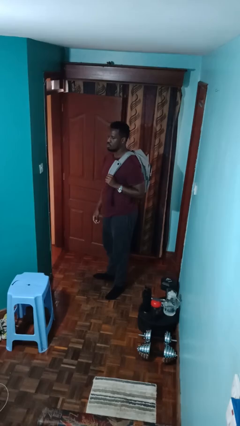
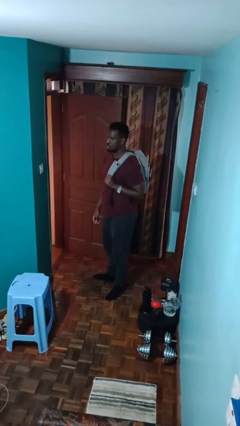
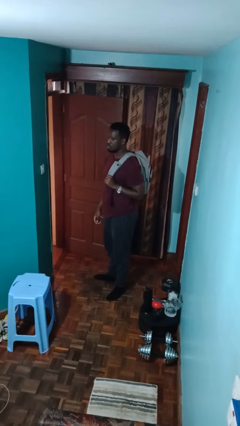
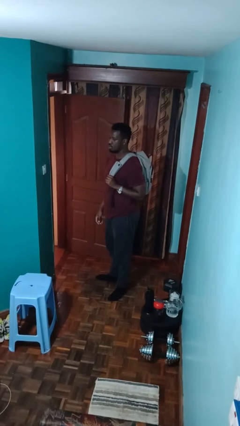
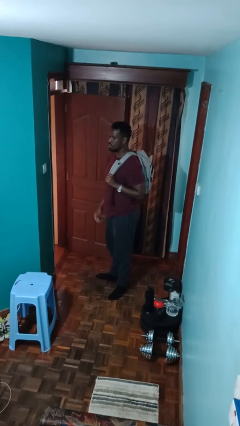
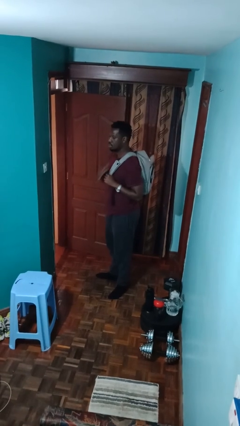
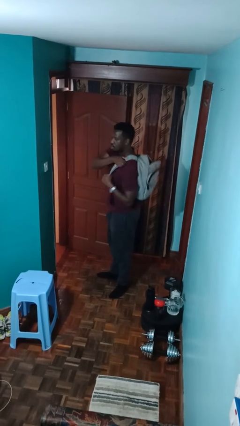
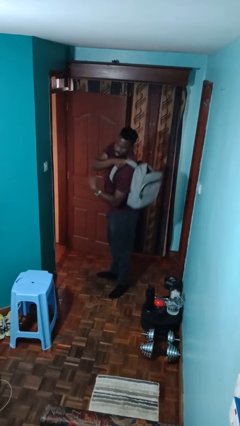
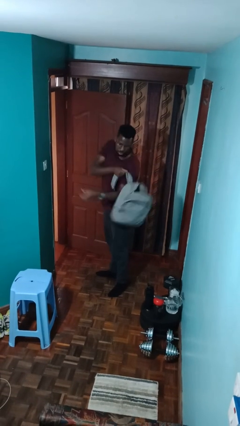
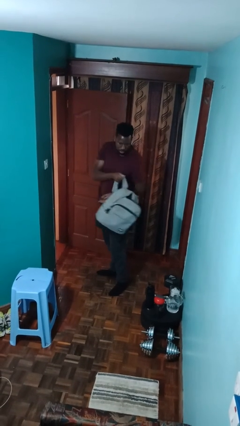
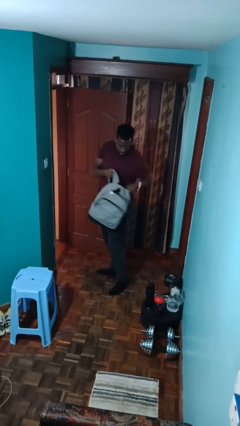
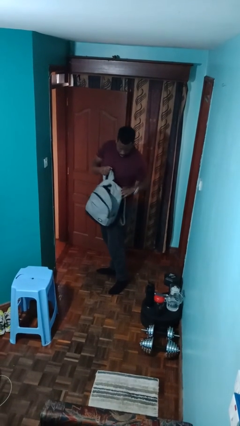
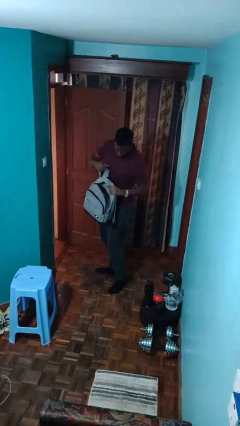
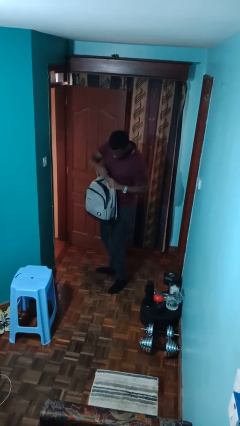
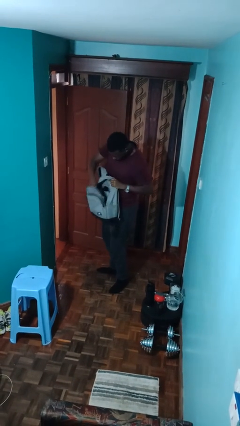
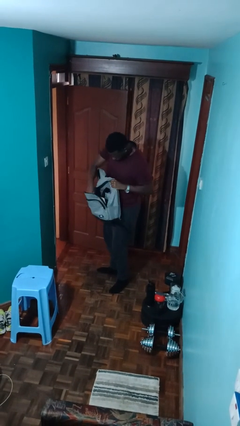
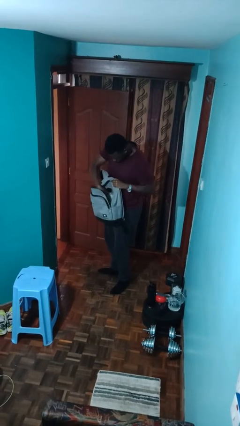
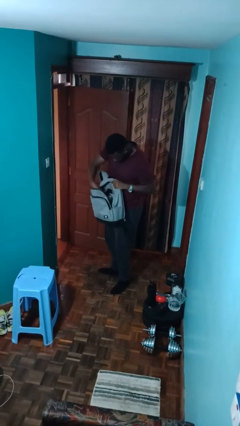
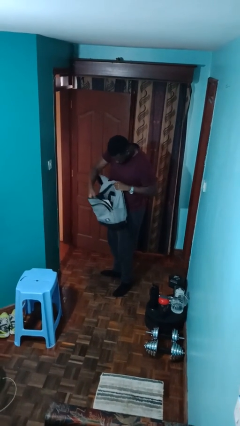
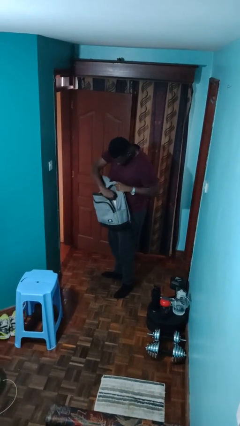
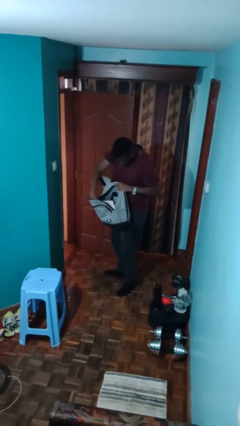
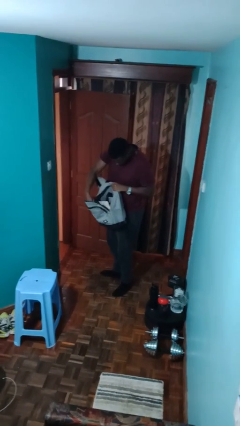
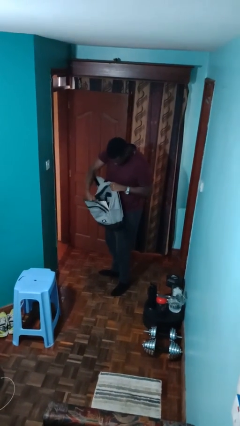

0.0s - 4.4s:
person searches in backpack

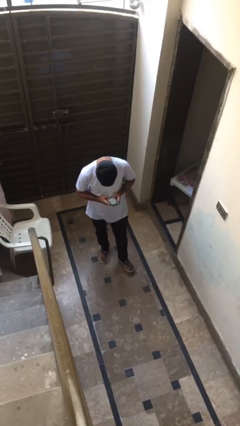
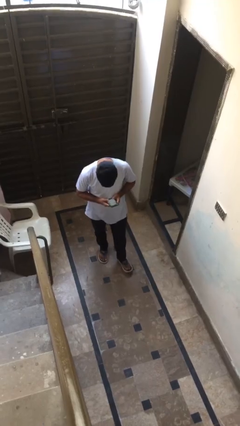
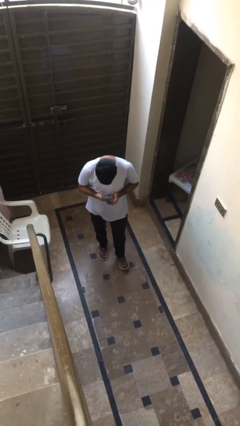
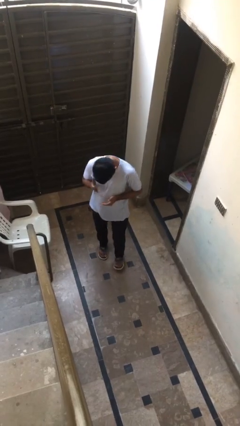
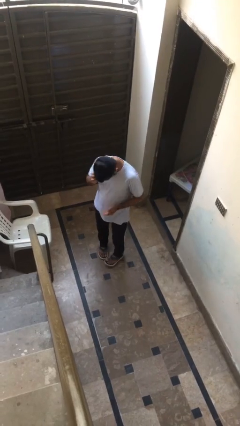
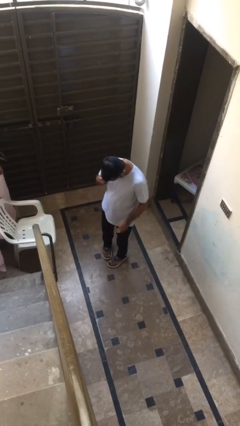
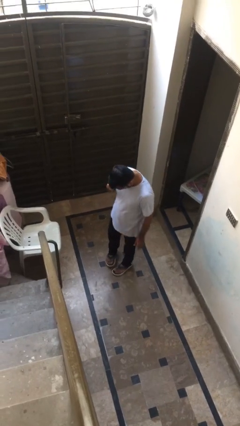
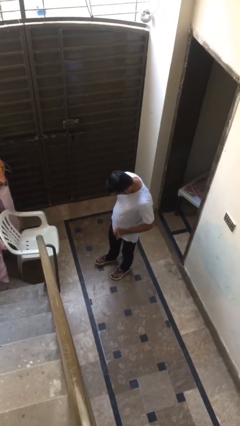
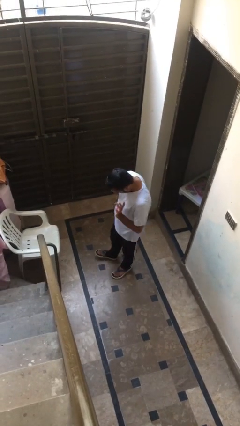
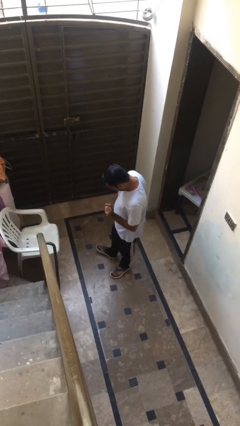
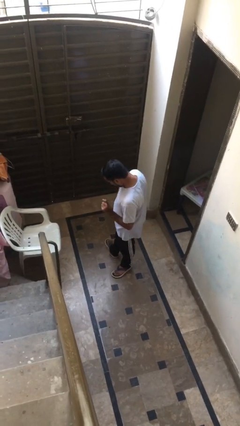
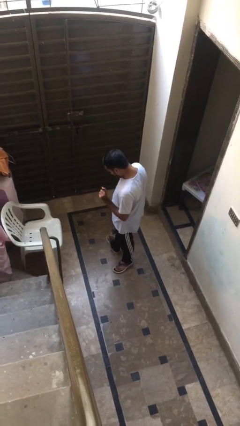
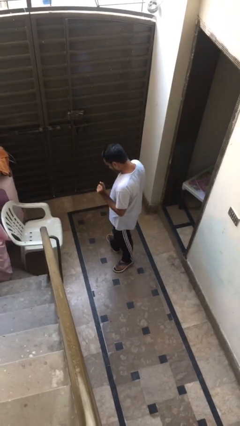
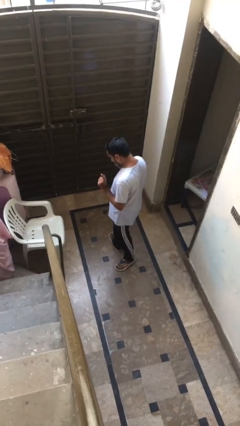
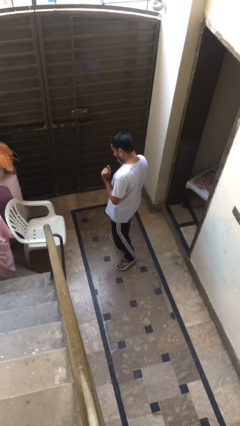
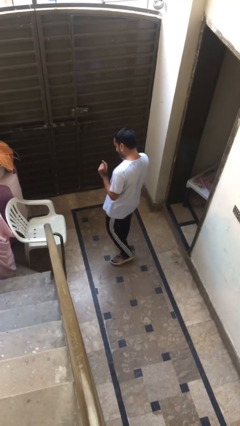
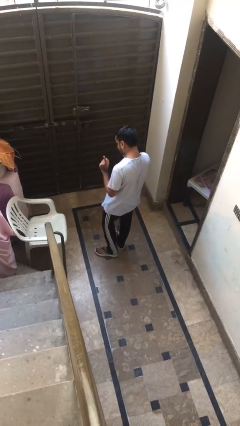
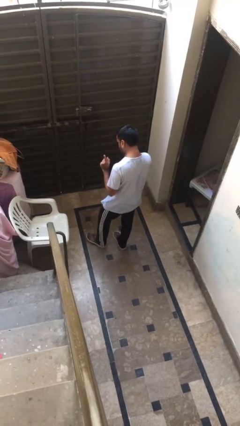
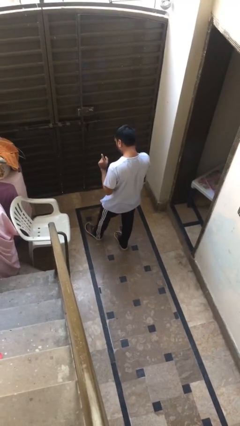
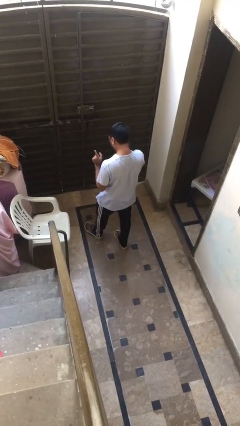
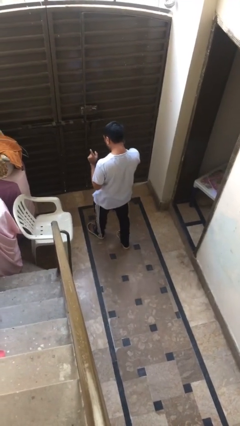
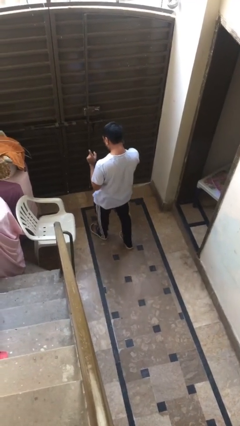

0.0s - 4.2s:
person talks on phone

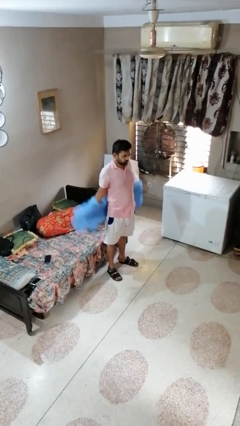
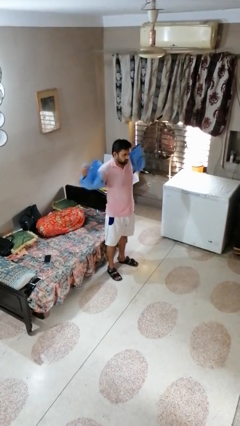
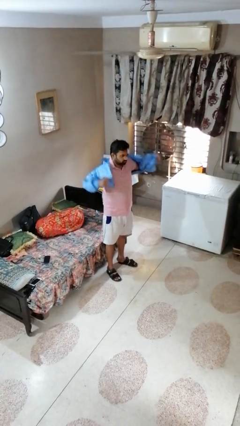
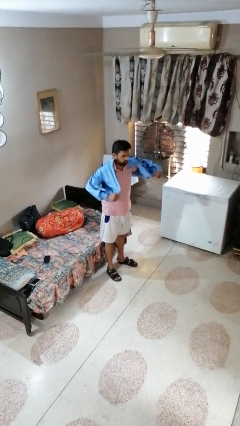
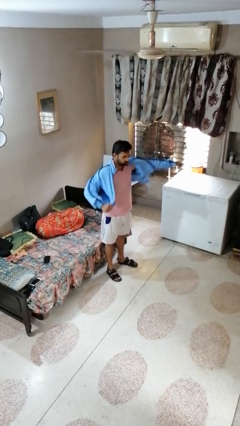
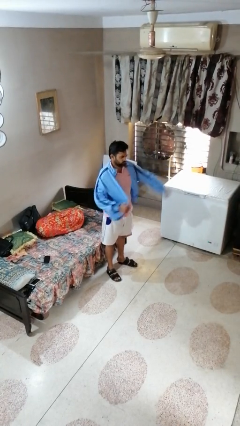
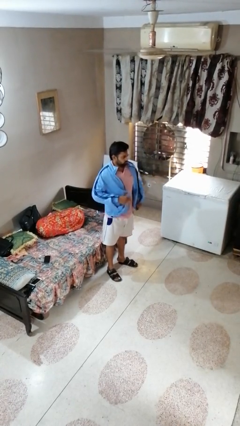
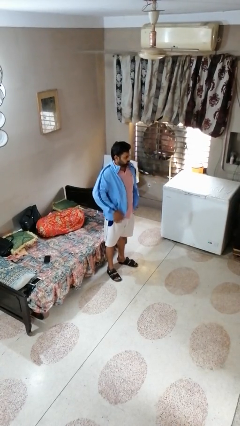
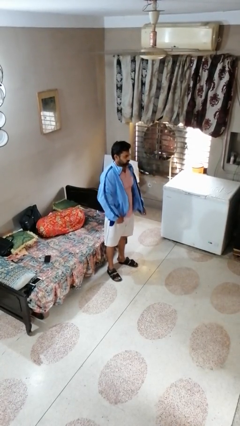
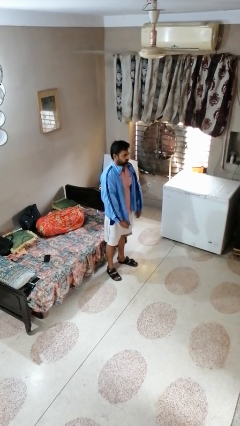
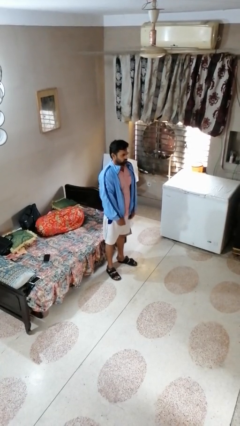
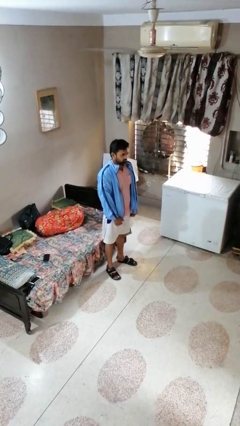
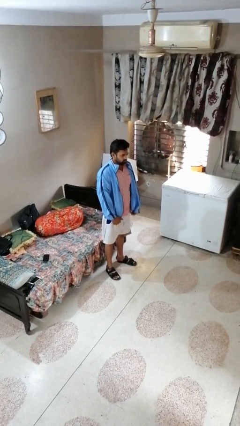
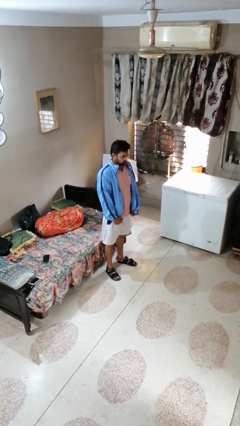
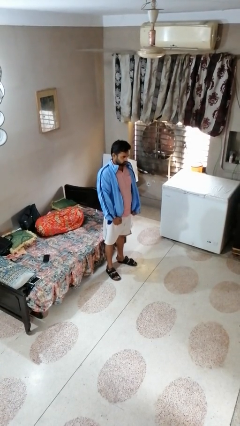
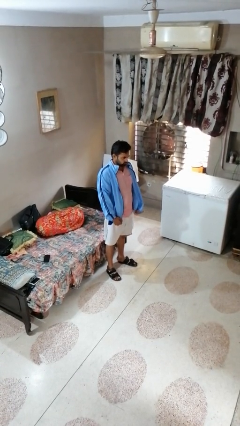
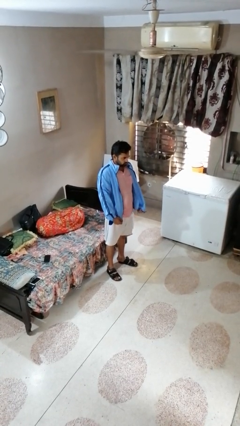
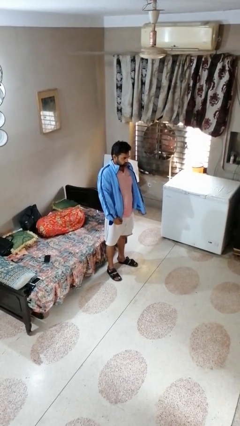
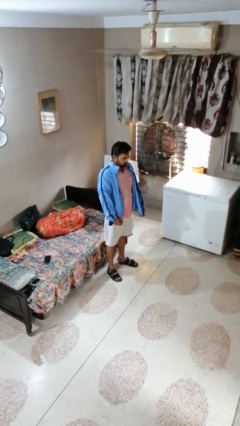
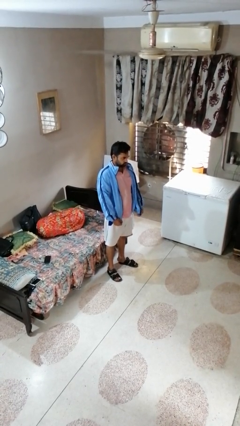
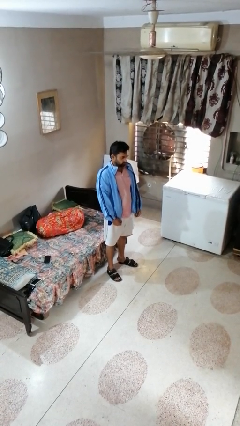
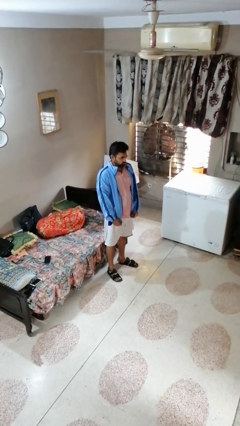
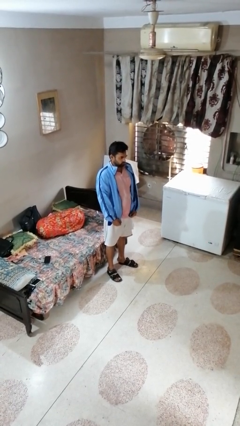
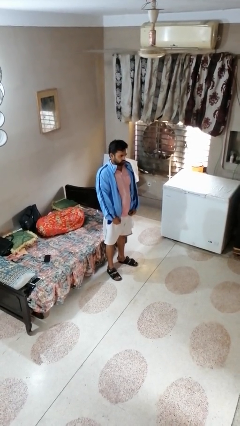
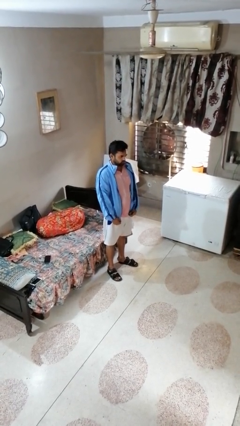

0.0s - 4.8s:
person puts on jacket

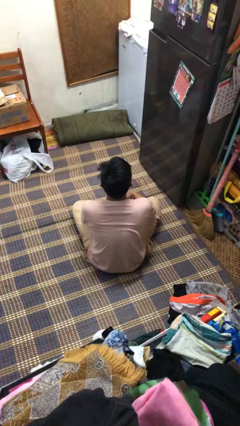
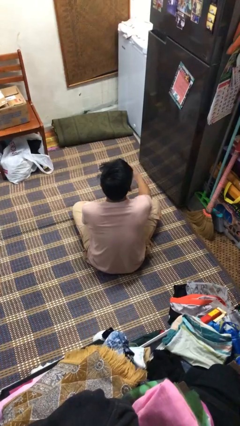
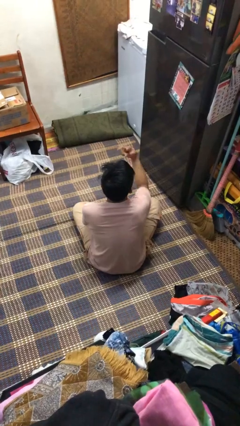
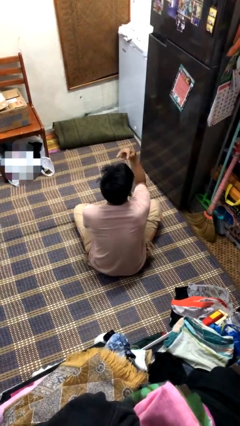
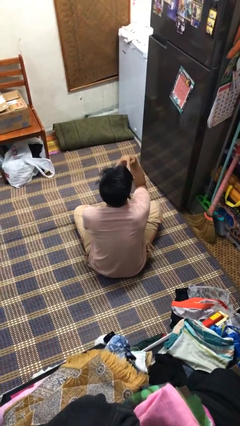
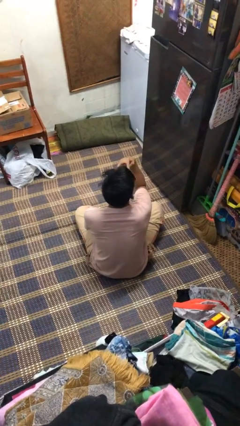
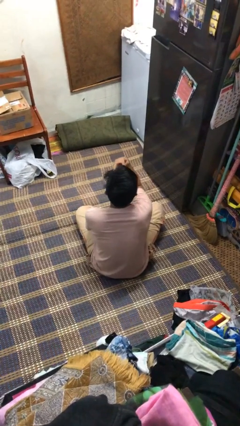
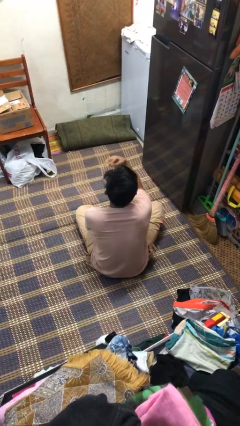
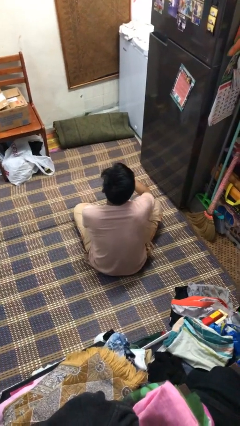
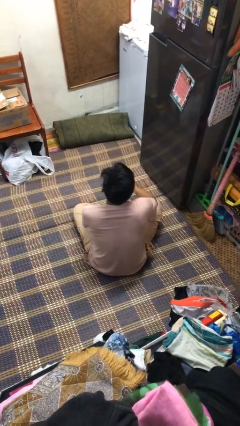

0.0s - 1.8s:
person gestures watch closely

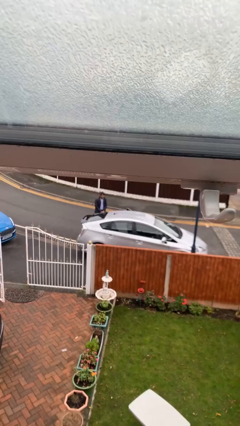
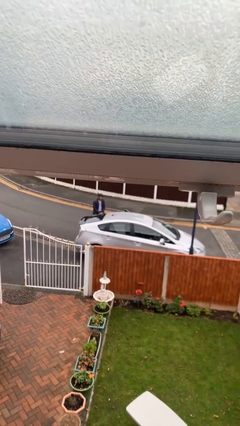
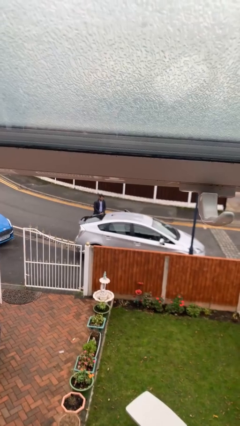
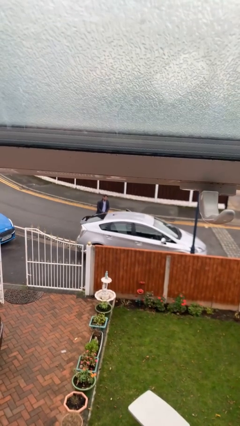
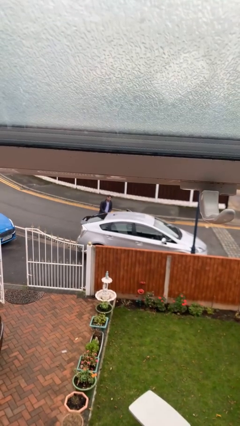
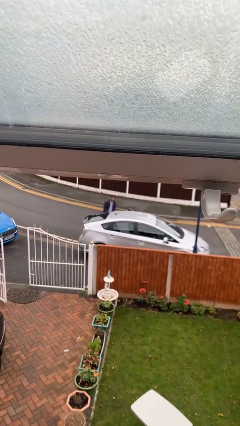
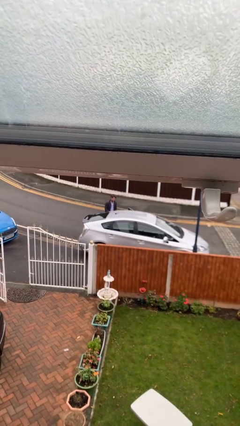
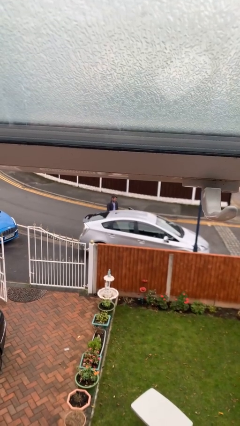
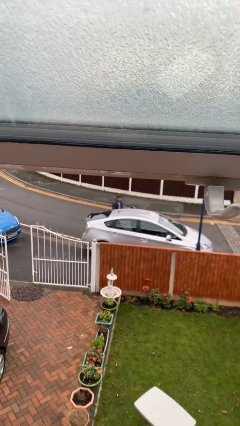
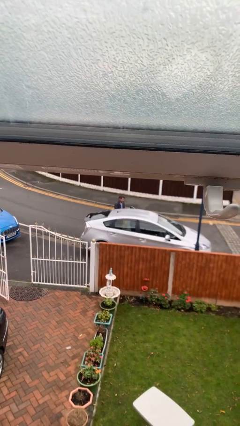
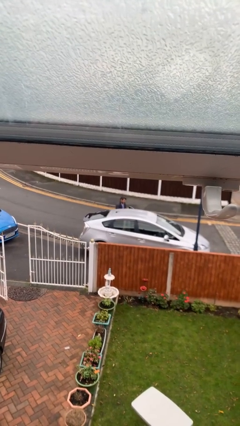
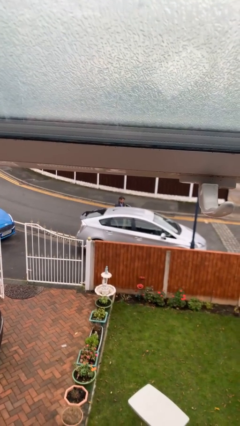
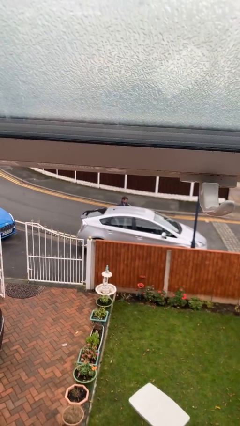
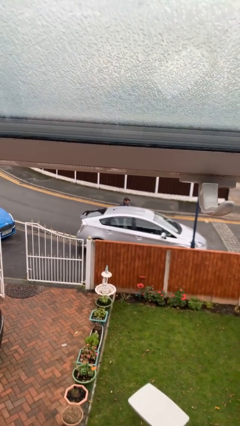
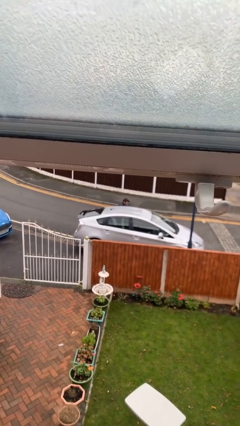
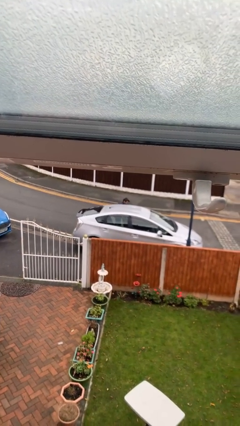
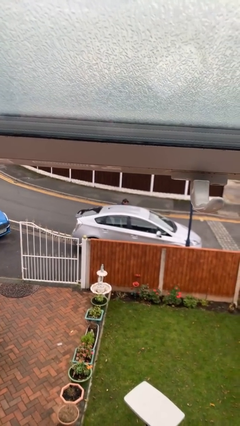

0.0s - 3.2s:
person loads car
